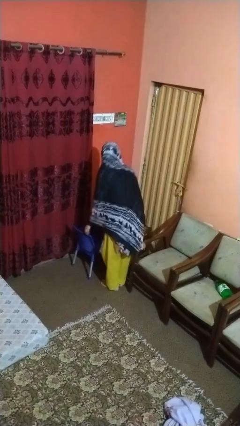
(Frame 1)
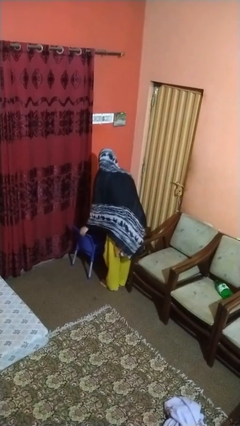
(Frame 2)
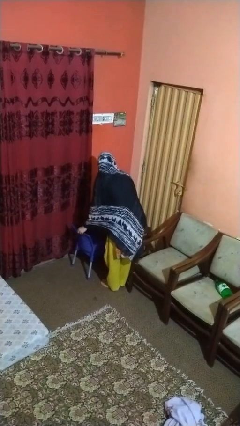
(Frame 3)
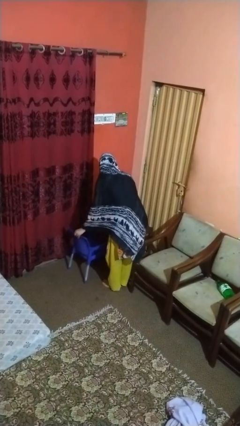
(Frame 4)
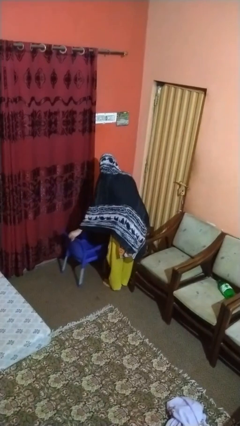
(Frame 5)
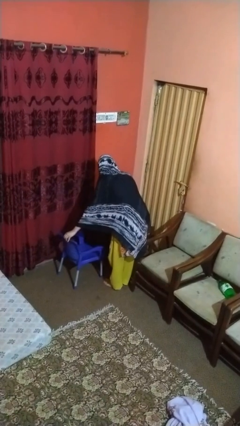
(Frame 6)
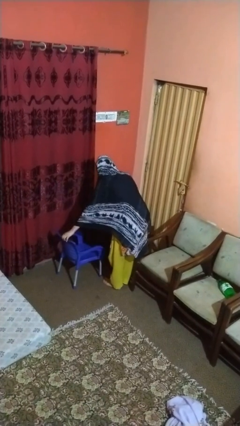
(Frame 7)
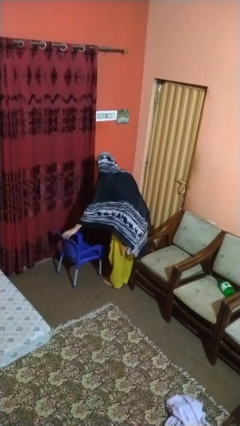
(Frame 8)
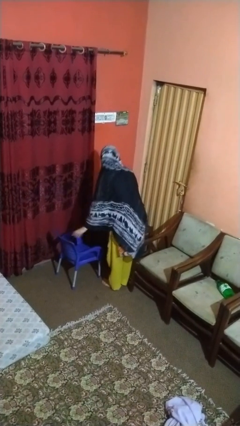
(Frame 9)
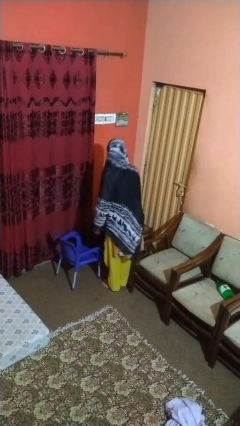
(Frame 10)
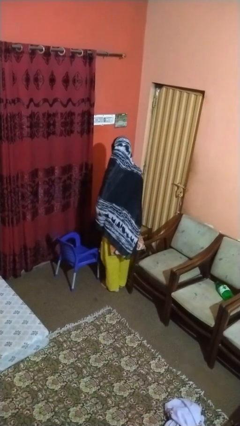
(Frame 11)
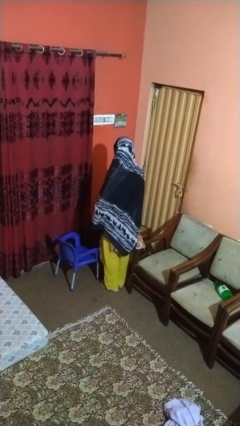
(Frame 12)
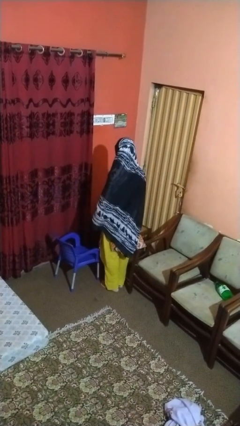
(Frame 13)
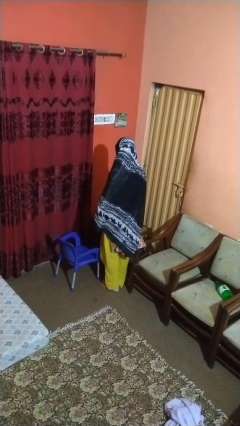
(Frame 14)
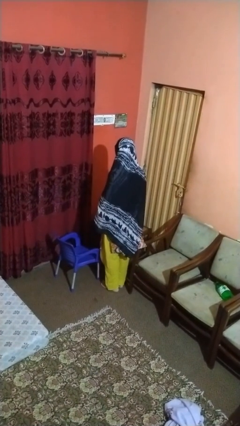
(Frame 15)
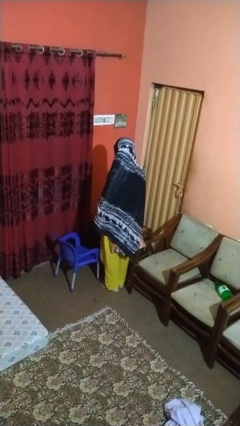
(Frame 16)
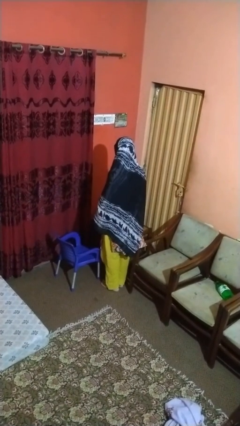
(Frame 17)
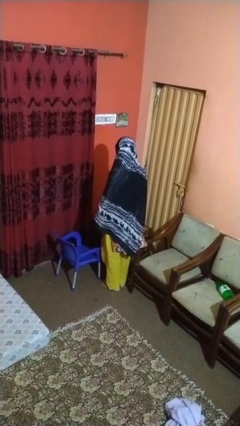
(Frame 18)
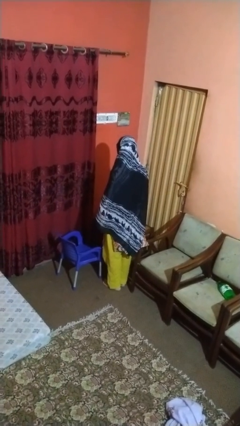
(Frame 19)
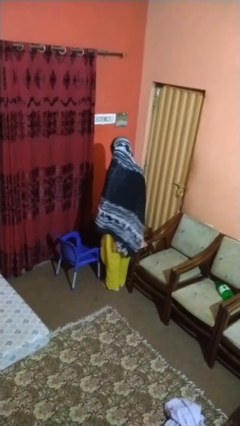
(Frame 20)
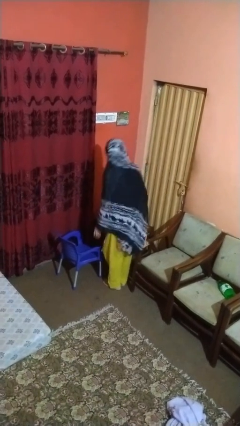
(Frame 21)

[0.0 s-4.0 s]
person pulls out chair

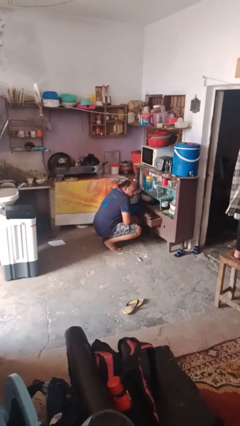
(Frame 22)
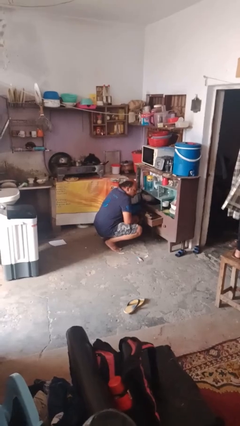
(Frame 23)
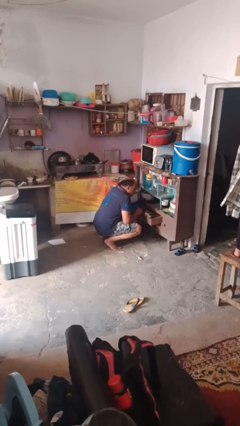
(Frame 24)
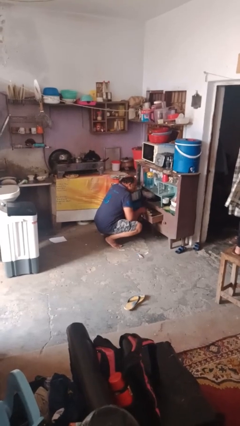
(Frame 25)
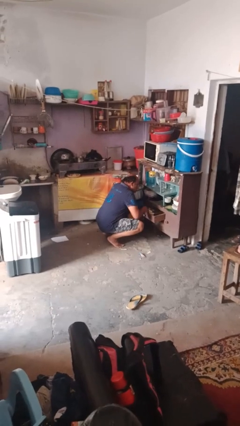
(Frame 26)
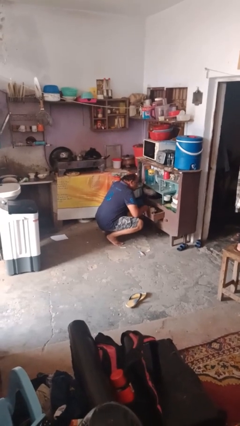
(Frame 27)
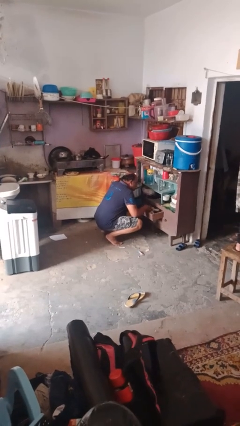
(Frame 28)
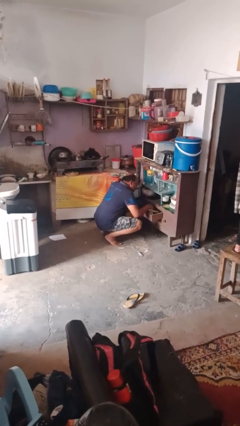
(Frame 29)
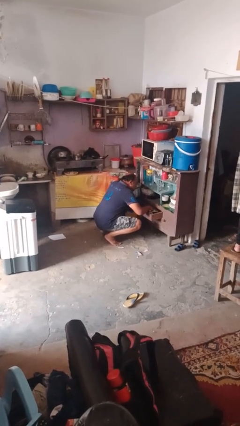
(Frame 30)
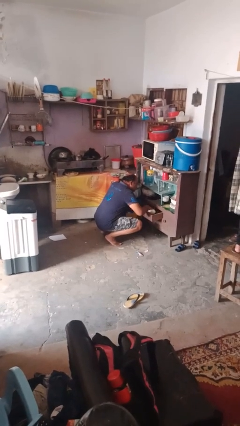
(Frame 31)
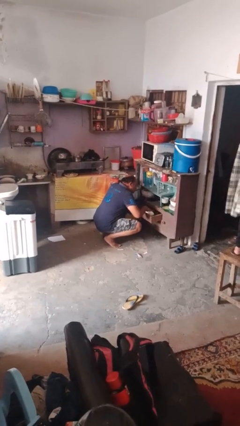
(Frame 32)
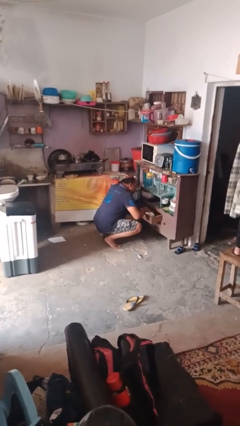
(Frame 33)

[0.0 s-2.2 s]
person searches in kitchen drawer

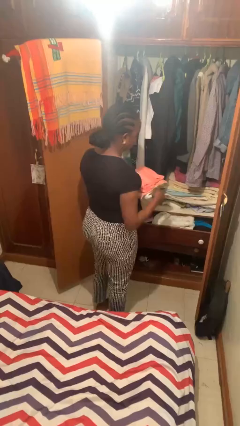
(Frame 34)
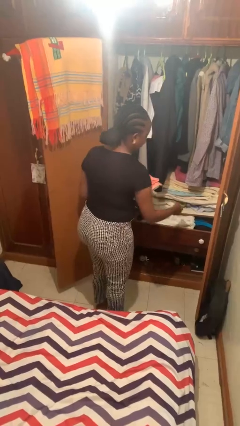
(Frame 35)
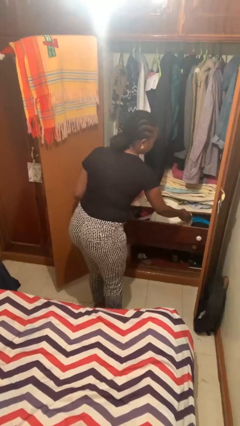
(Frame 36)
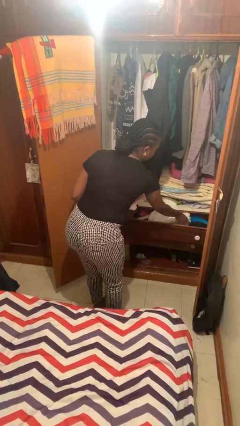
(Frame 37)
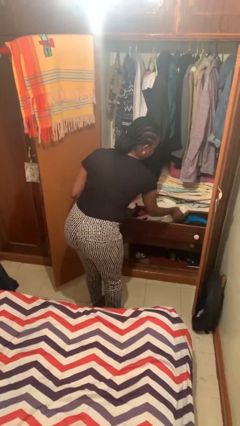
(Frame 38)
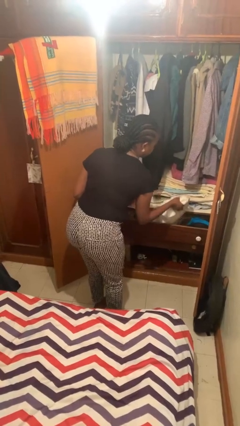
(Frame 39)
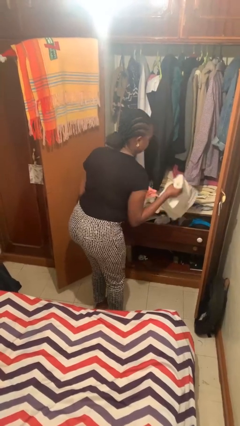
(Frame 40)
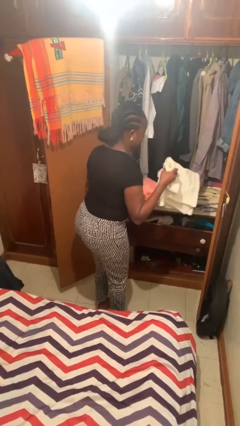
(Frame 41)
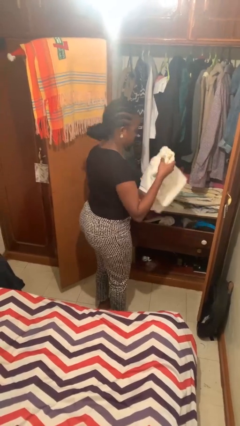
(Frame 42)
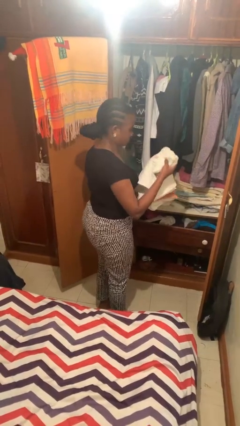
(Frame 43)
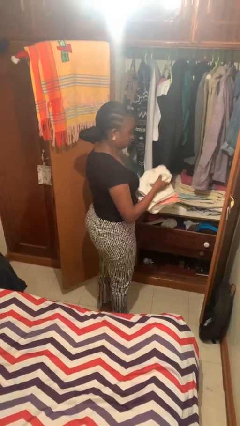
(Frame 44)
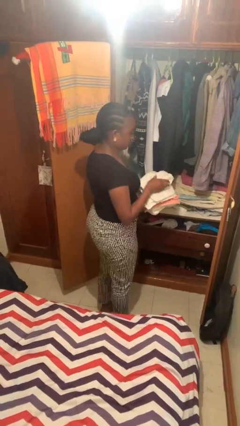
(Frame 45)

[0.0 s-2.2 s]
person takes clothes from dresser

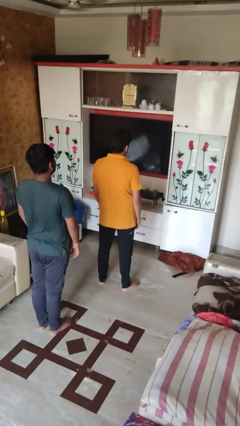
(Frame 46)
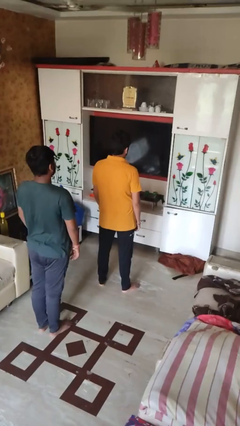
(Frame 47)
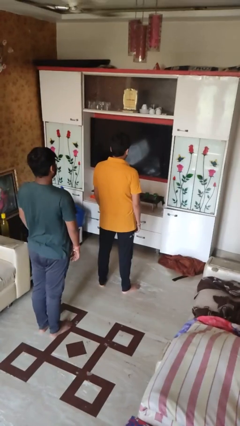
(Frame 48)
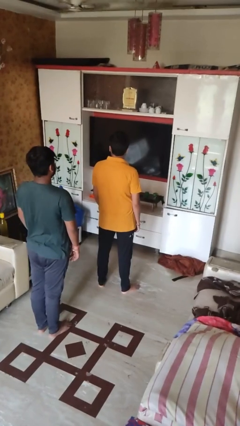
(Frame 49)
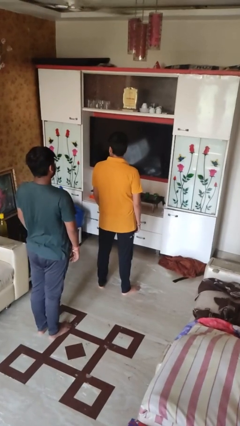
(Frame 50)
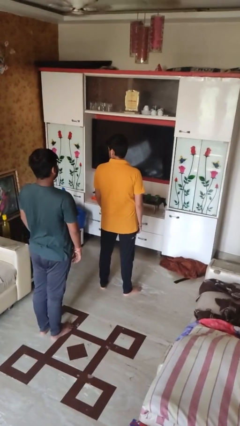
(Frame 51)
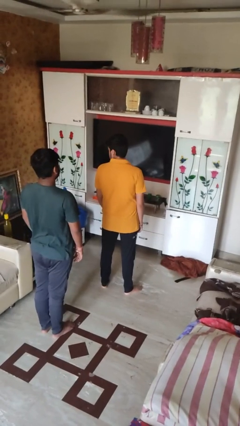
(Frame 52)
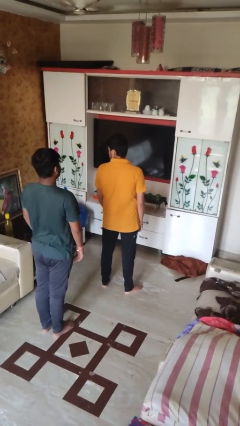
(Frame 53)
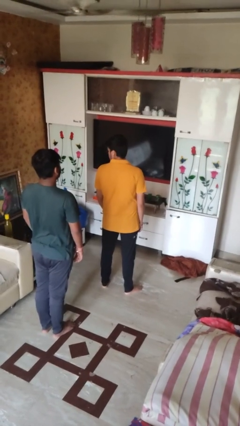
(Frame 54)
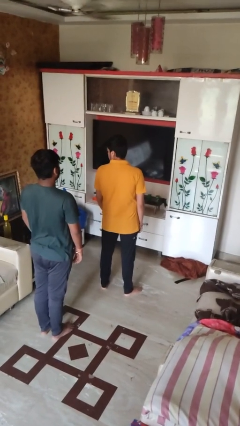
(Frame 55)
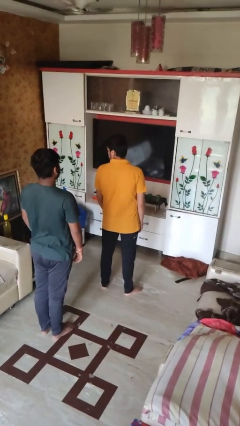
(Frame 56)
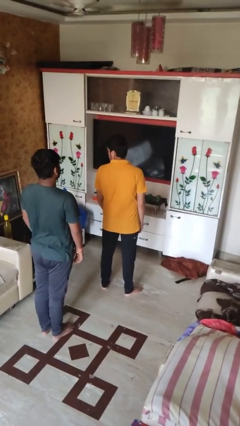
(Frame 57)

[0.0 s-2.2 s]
person looks over shoulder

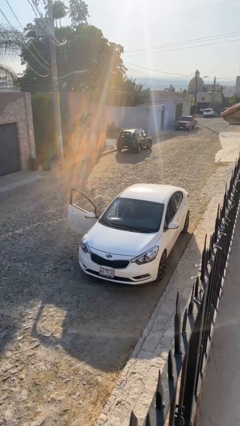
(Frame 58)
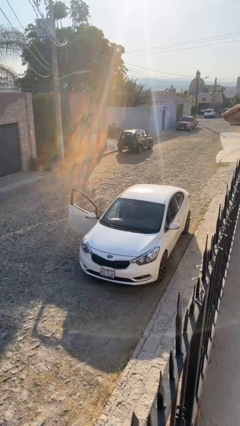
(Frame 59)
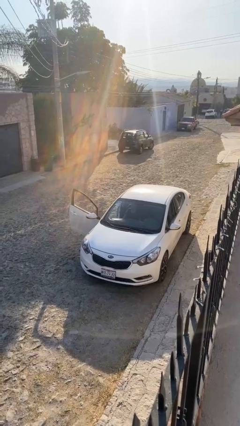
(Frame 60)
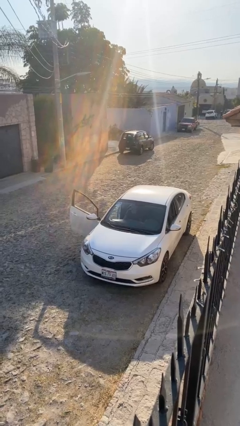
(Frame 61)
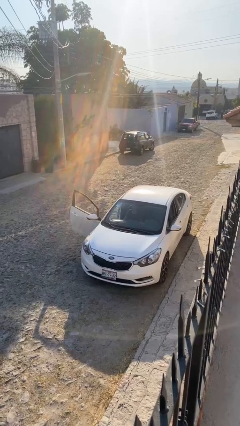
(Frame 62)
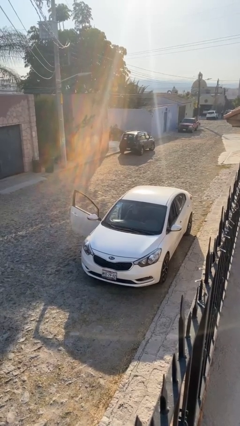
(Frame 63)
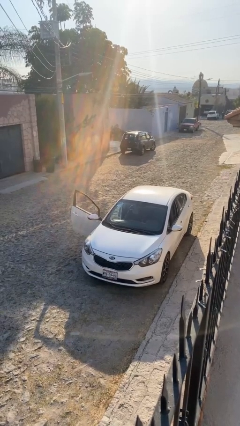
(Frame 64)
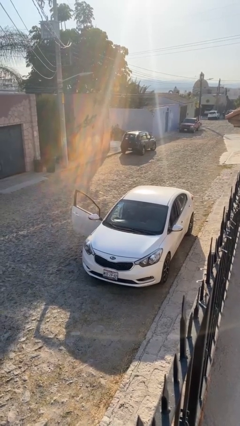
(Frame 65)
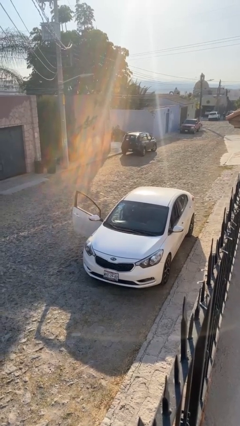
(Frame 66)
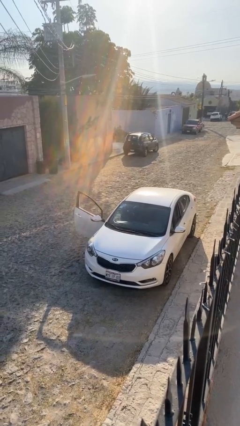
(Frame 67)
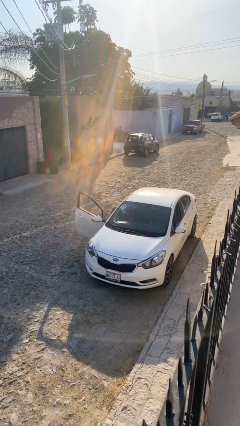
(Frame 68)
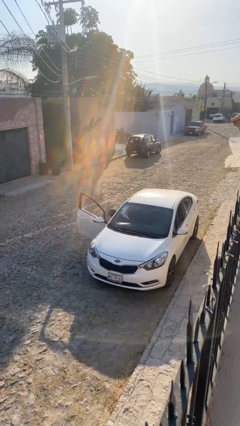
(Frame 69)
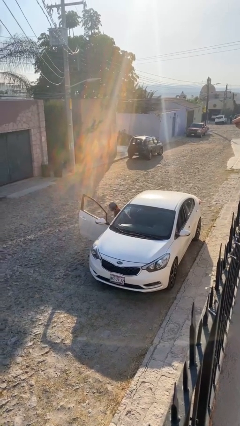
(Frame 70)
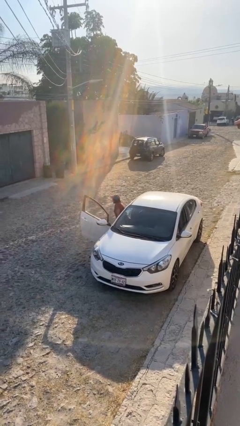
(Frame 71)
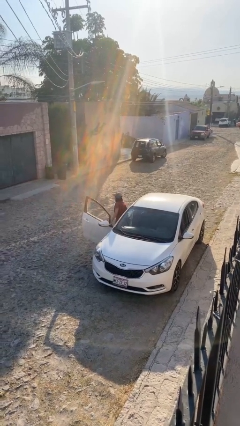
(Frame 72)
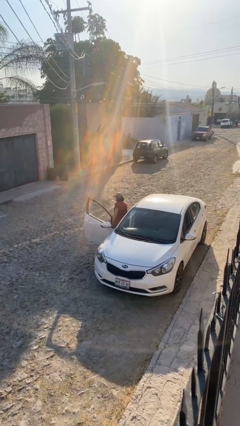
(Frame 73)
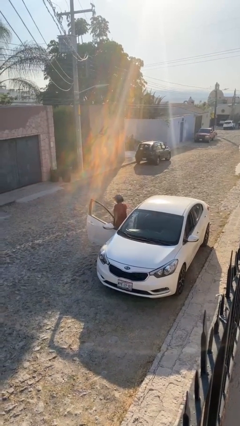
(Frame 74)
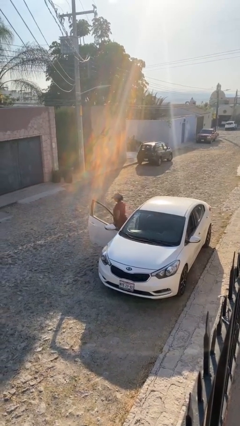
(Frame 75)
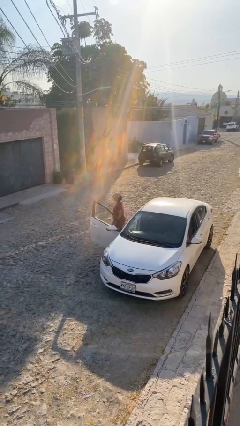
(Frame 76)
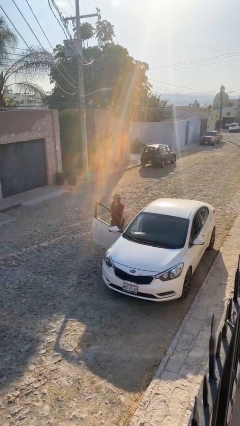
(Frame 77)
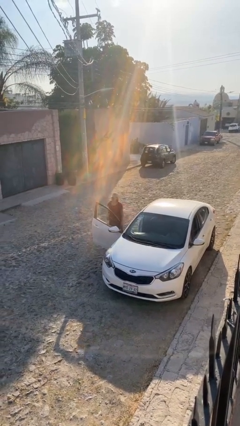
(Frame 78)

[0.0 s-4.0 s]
person exits car

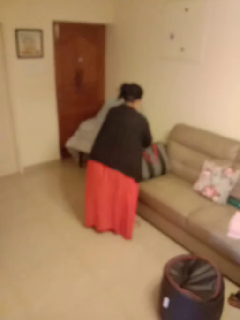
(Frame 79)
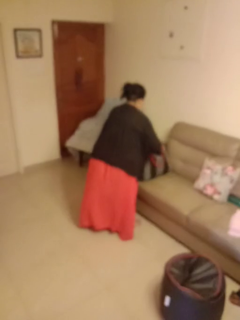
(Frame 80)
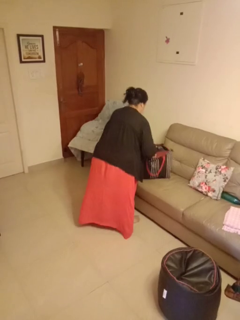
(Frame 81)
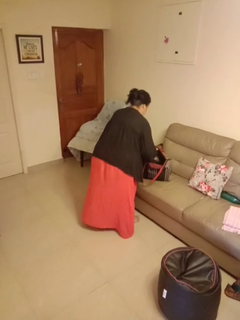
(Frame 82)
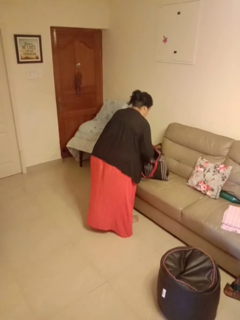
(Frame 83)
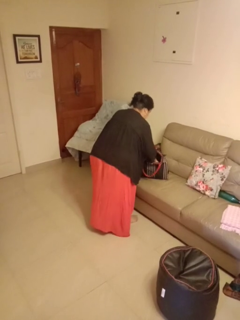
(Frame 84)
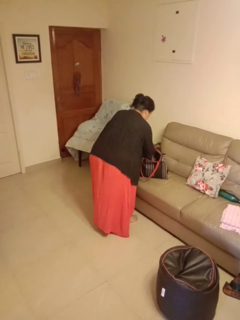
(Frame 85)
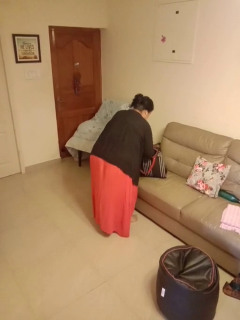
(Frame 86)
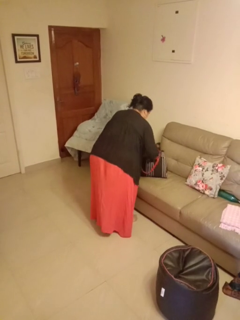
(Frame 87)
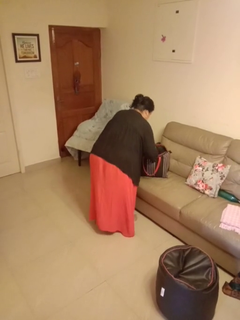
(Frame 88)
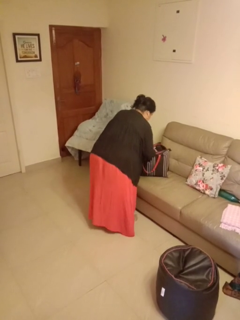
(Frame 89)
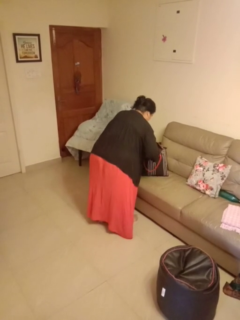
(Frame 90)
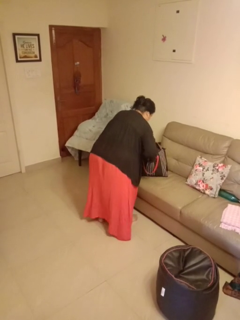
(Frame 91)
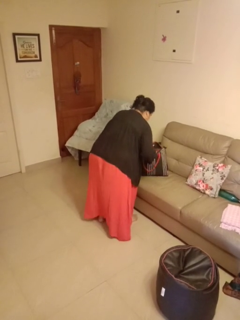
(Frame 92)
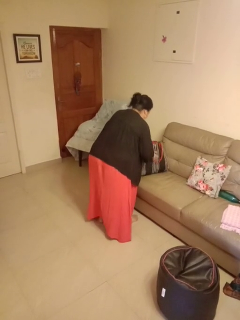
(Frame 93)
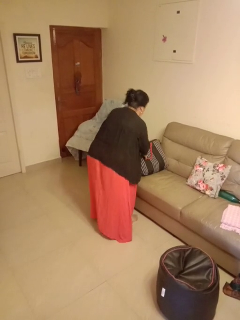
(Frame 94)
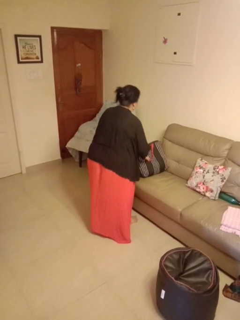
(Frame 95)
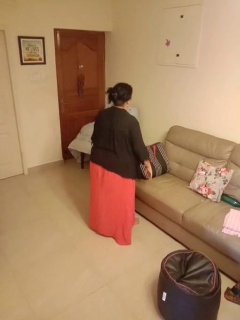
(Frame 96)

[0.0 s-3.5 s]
person searches in bag

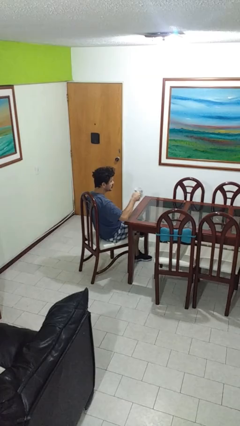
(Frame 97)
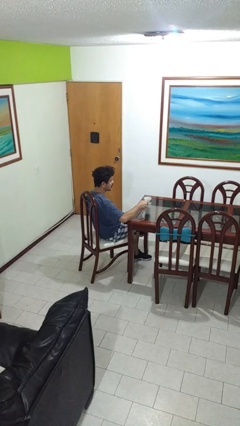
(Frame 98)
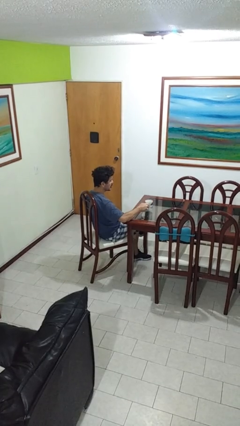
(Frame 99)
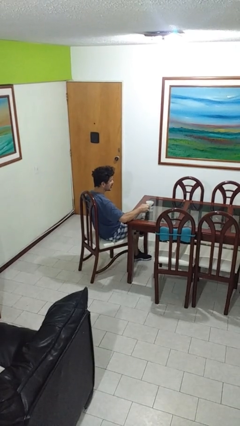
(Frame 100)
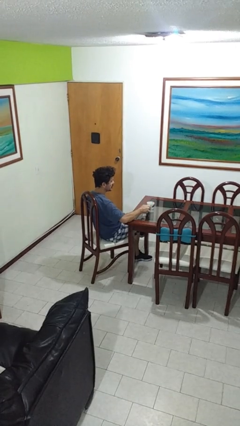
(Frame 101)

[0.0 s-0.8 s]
person puts down object on table
